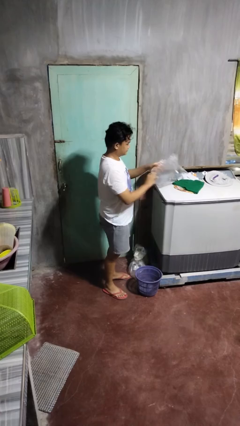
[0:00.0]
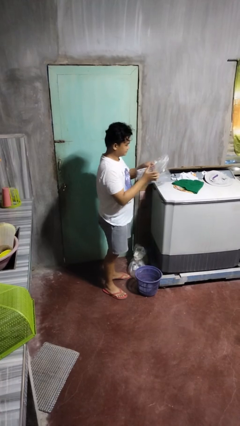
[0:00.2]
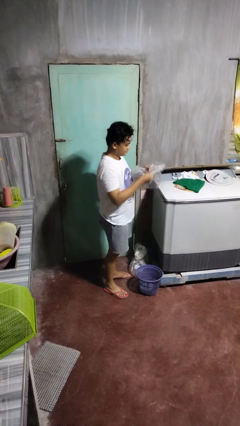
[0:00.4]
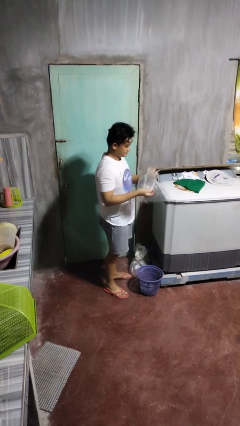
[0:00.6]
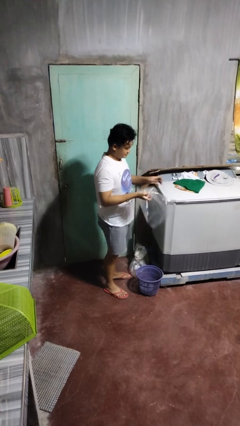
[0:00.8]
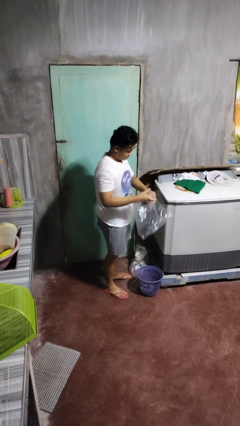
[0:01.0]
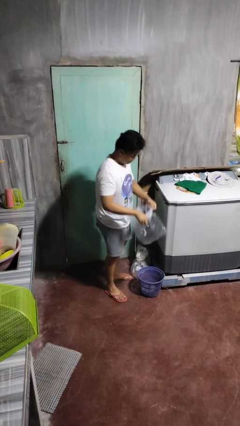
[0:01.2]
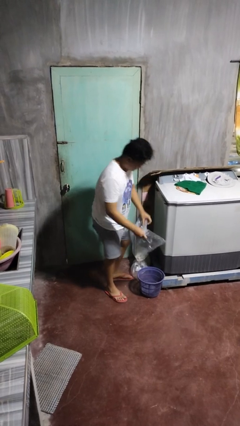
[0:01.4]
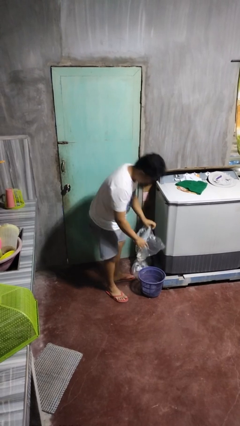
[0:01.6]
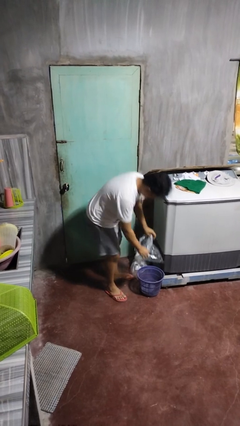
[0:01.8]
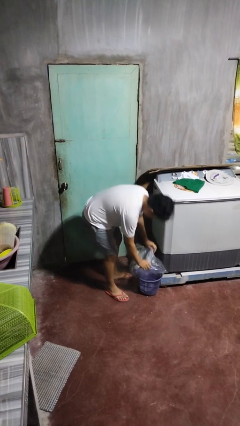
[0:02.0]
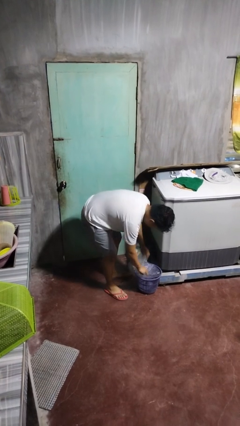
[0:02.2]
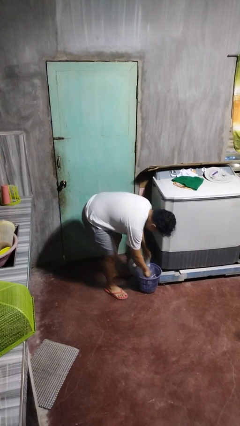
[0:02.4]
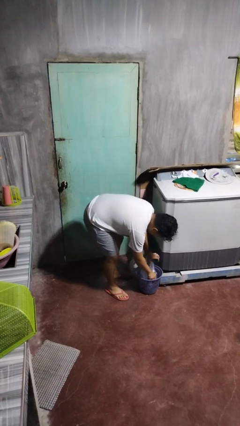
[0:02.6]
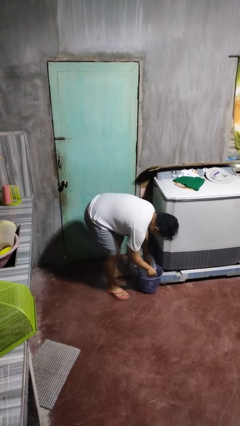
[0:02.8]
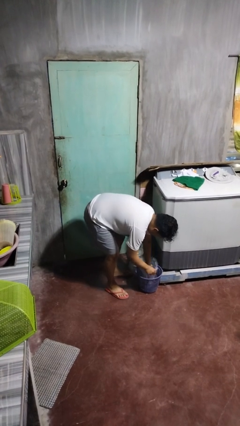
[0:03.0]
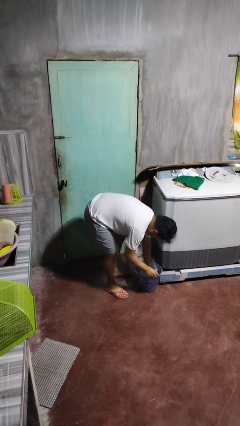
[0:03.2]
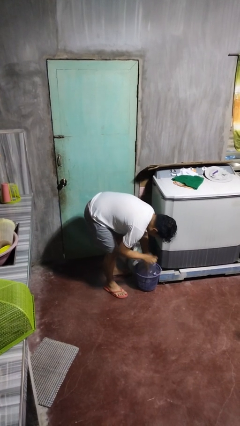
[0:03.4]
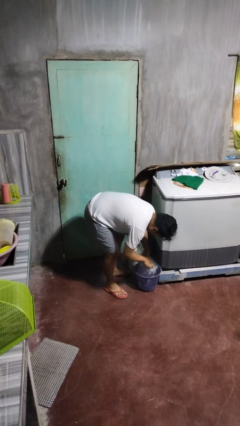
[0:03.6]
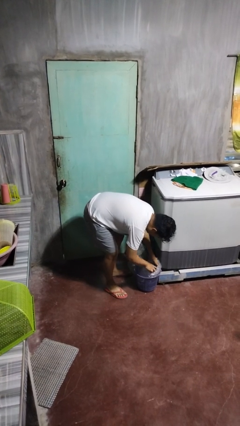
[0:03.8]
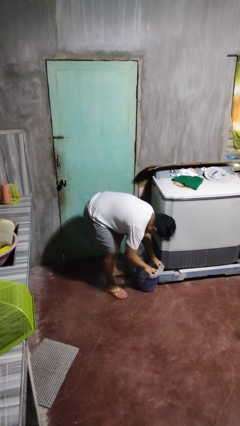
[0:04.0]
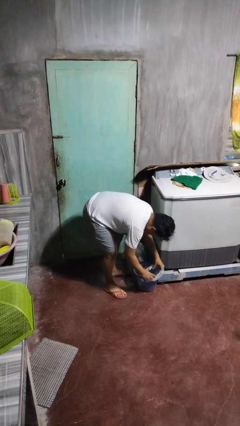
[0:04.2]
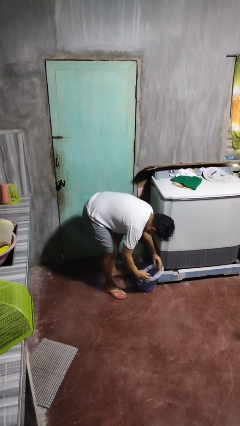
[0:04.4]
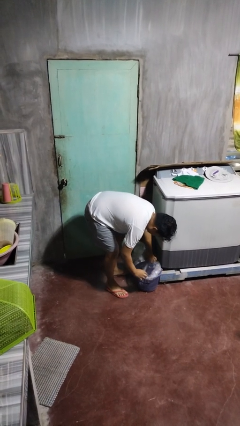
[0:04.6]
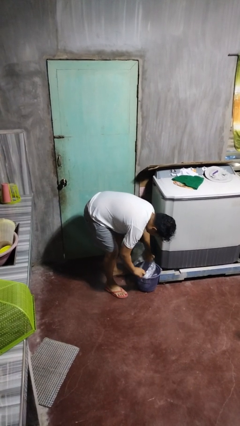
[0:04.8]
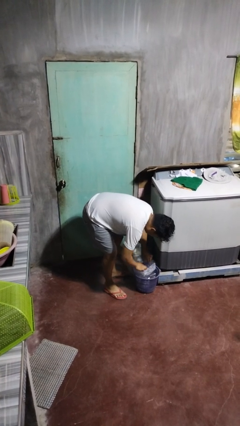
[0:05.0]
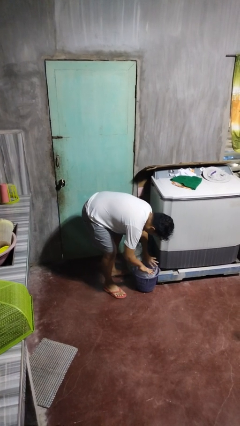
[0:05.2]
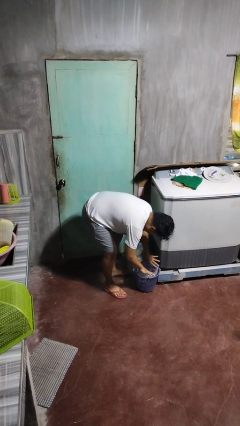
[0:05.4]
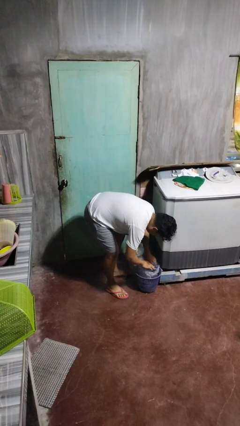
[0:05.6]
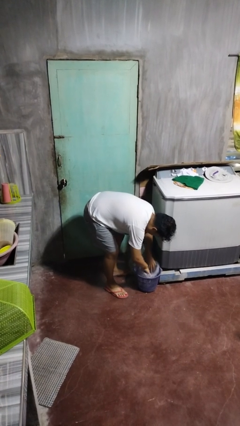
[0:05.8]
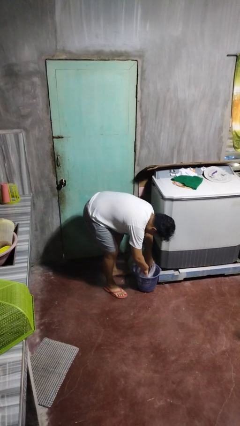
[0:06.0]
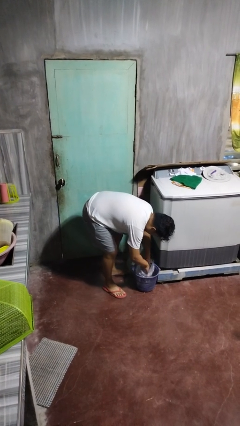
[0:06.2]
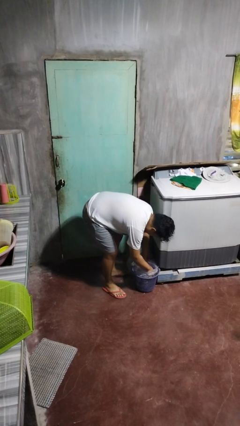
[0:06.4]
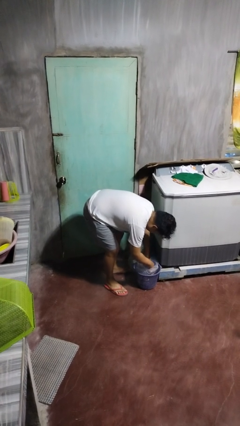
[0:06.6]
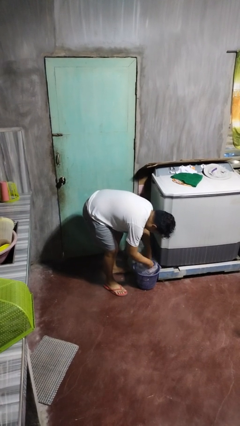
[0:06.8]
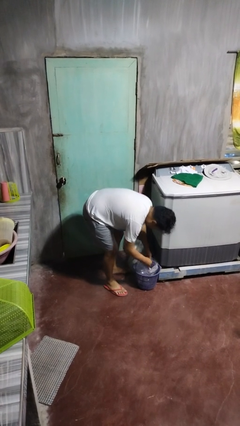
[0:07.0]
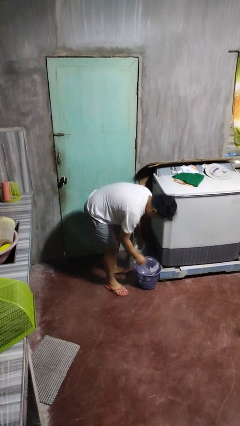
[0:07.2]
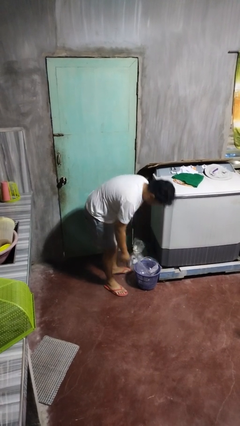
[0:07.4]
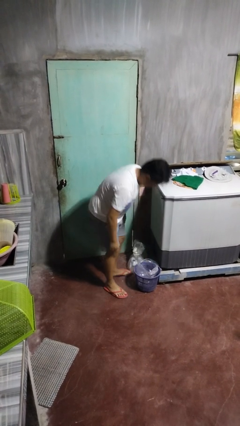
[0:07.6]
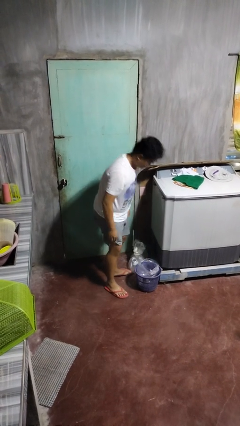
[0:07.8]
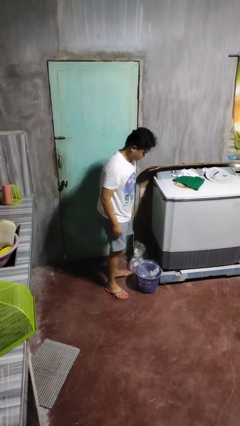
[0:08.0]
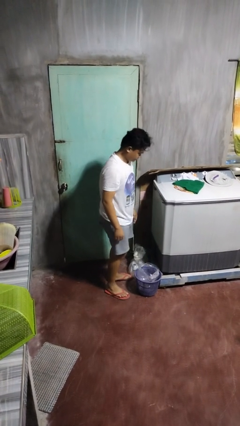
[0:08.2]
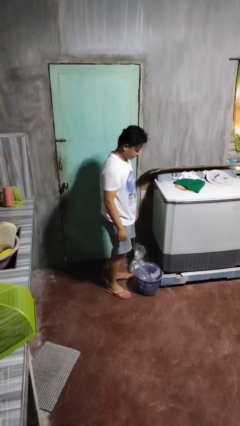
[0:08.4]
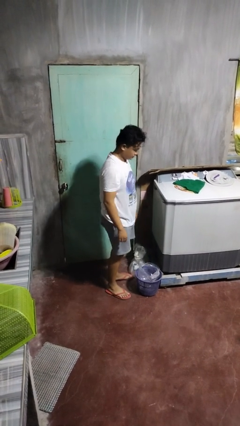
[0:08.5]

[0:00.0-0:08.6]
person inserts trashbag into trashcan

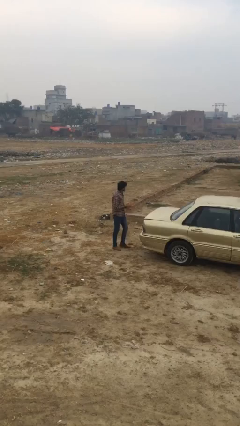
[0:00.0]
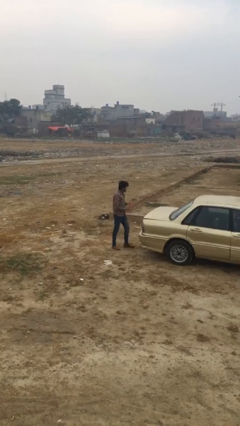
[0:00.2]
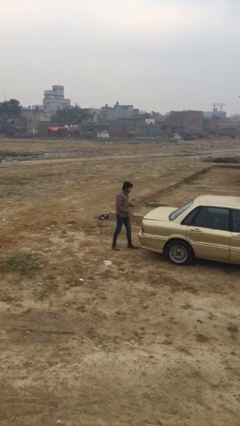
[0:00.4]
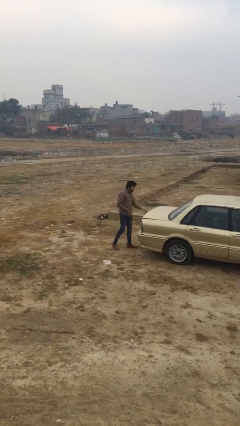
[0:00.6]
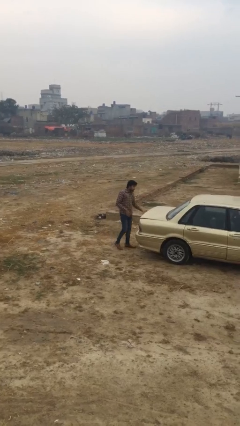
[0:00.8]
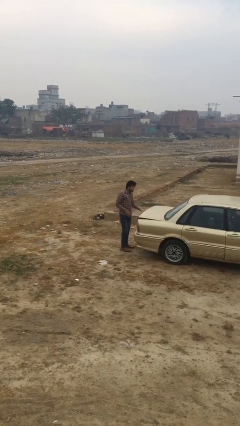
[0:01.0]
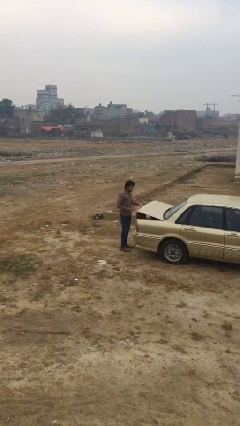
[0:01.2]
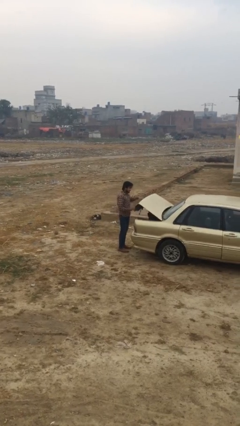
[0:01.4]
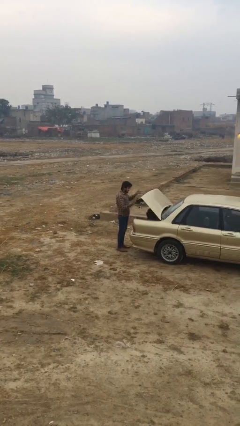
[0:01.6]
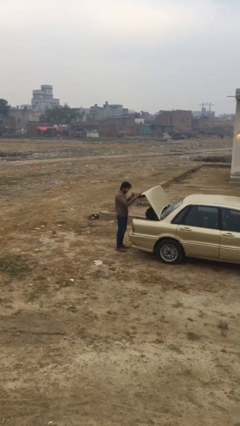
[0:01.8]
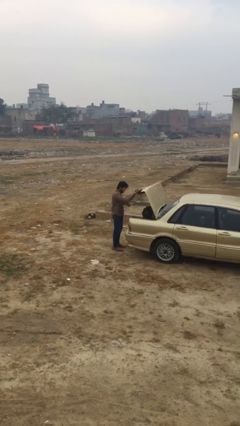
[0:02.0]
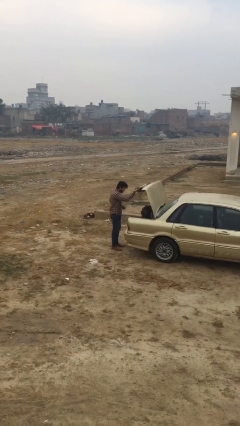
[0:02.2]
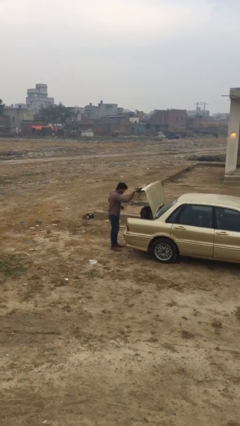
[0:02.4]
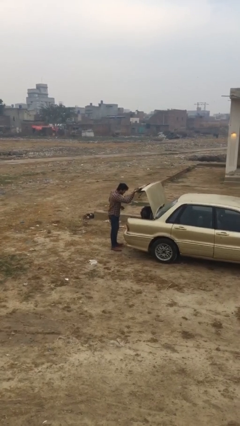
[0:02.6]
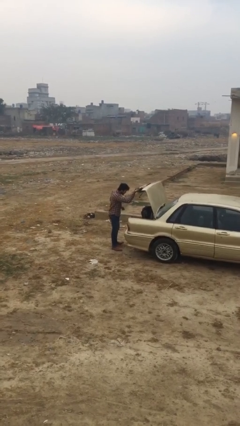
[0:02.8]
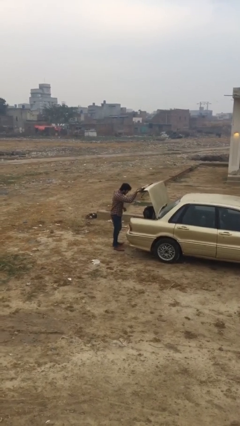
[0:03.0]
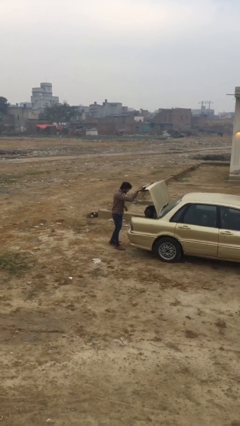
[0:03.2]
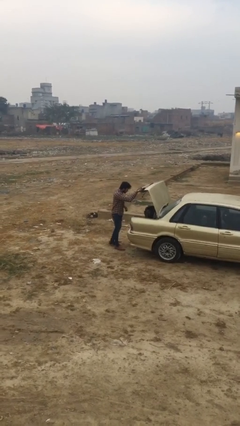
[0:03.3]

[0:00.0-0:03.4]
person opens car trunk

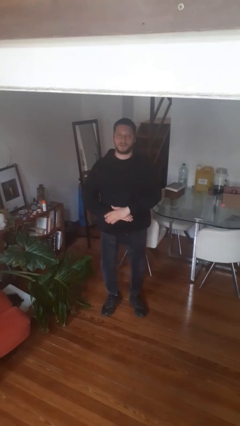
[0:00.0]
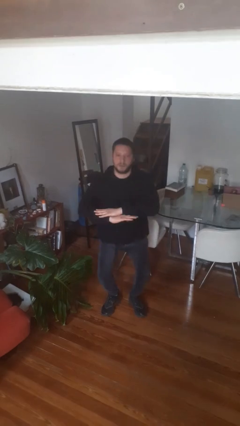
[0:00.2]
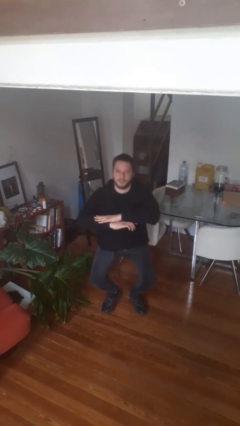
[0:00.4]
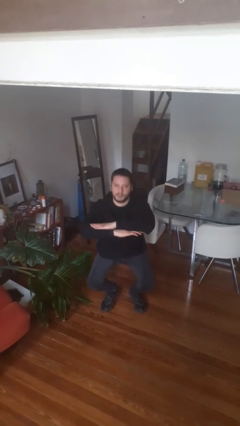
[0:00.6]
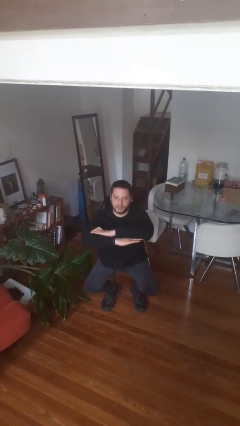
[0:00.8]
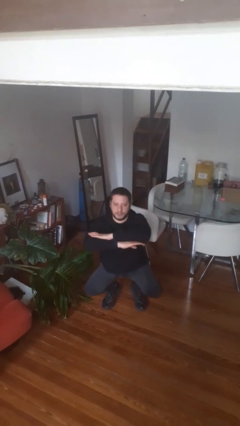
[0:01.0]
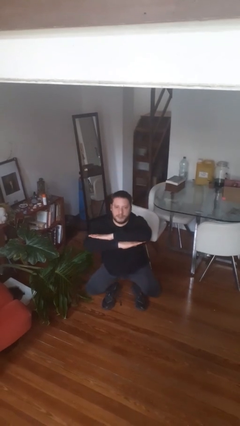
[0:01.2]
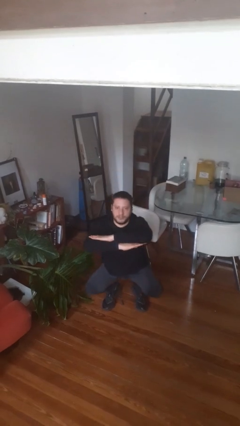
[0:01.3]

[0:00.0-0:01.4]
person squats

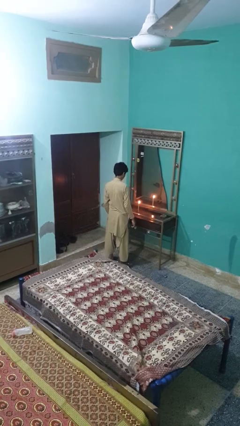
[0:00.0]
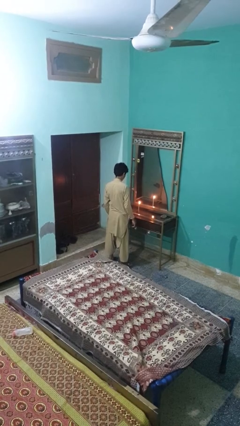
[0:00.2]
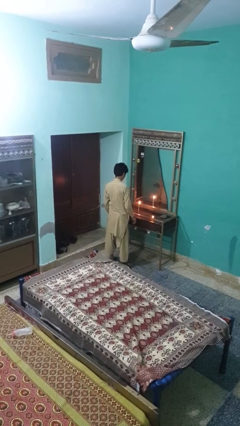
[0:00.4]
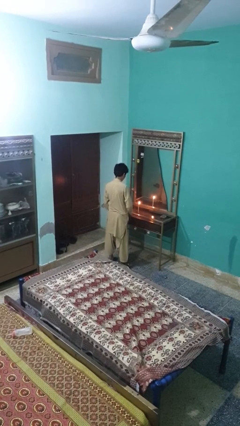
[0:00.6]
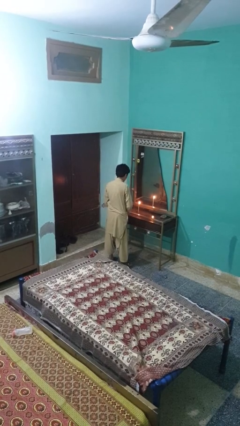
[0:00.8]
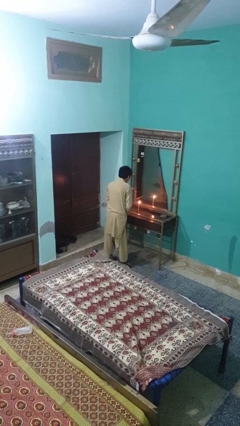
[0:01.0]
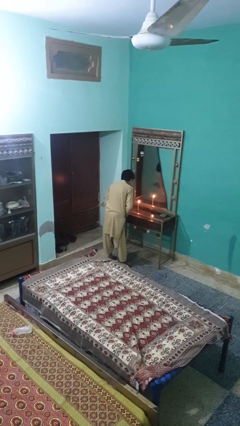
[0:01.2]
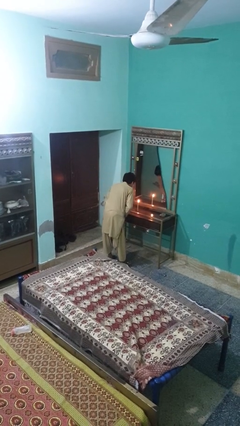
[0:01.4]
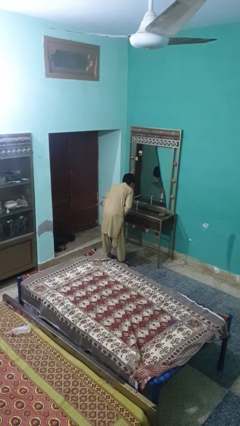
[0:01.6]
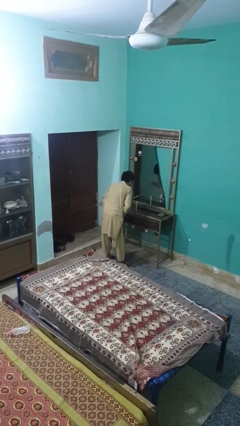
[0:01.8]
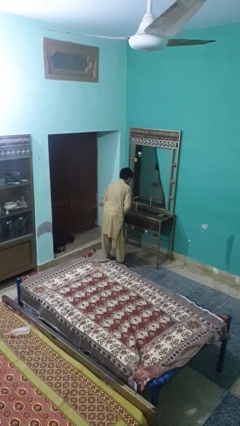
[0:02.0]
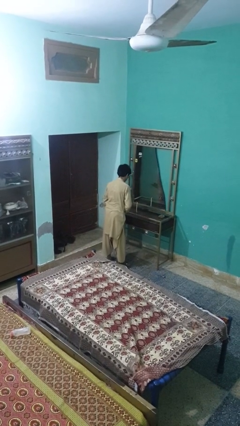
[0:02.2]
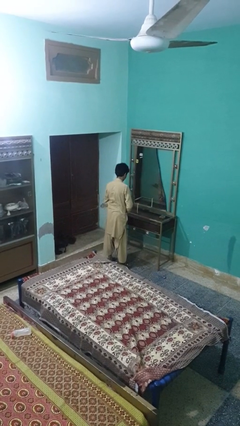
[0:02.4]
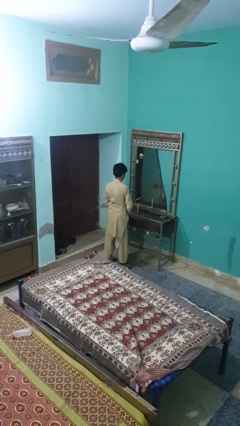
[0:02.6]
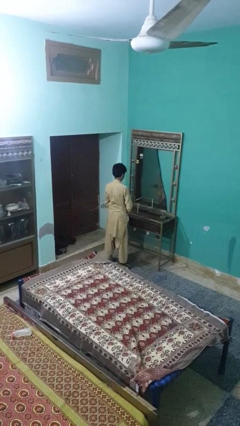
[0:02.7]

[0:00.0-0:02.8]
person extinguishes candle

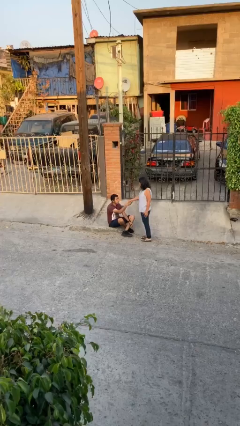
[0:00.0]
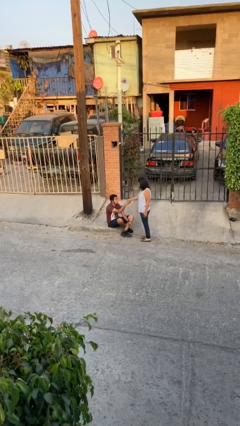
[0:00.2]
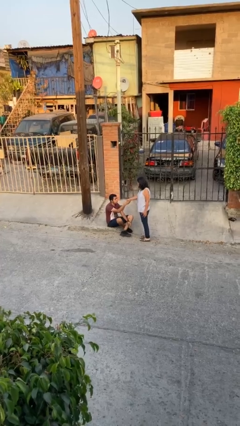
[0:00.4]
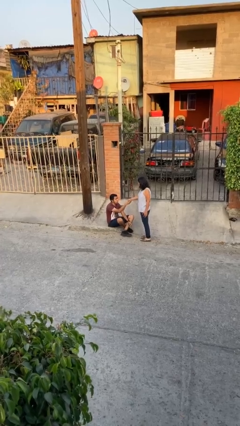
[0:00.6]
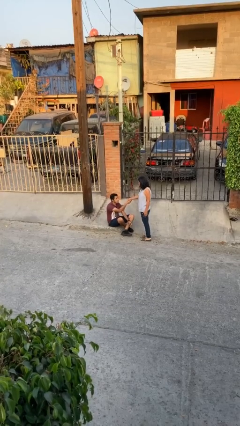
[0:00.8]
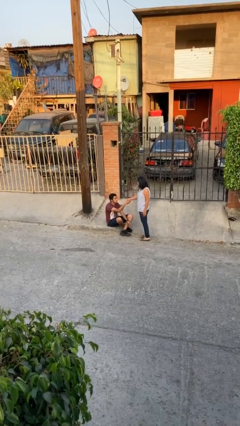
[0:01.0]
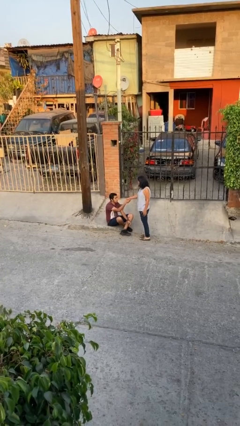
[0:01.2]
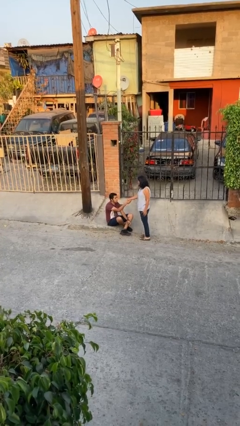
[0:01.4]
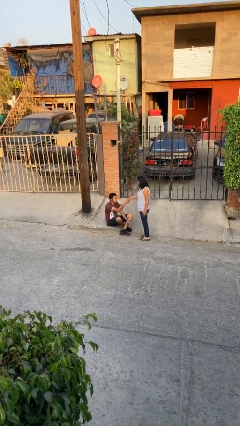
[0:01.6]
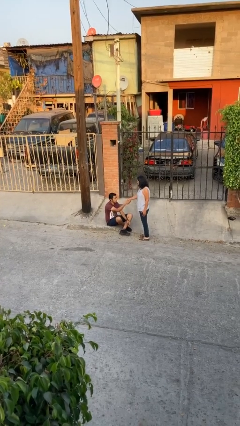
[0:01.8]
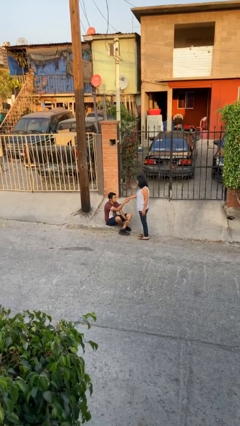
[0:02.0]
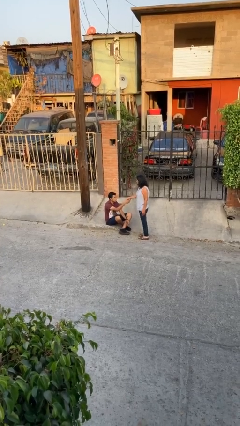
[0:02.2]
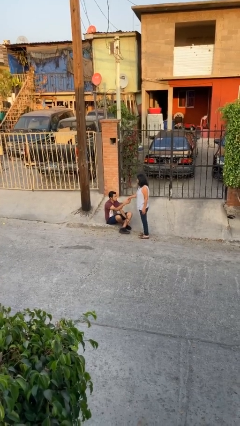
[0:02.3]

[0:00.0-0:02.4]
person shakes hand
